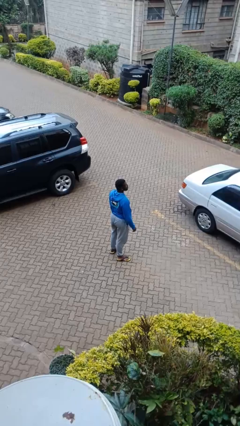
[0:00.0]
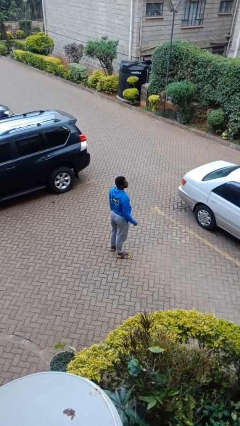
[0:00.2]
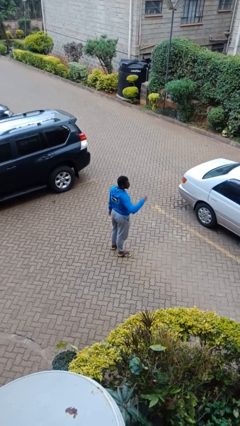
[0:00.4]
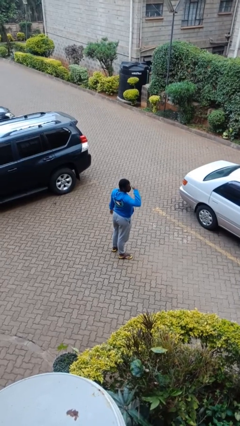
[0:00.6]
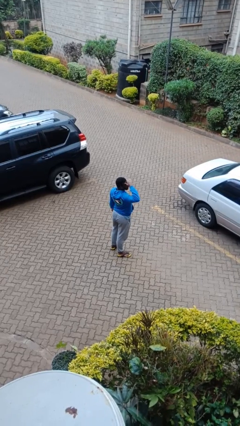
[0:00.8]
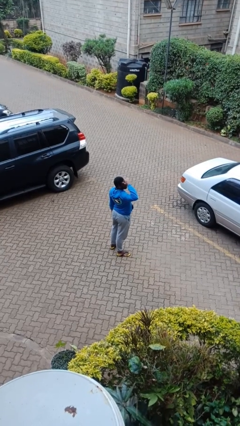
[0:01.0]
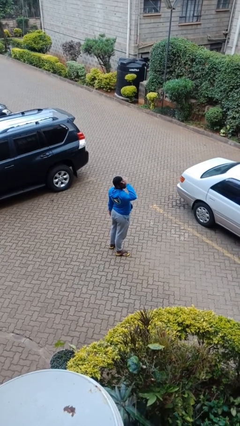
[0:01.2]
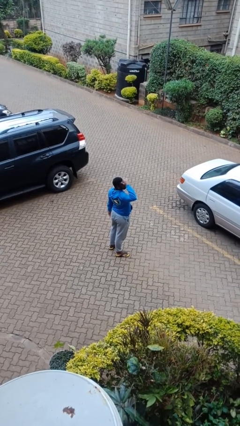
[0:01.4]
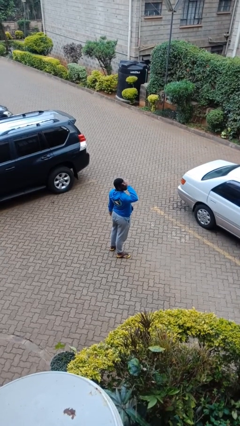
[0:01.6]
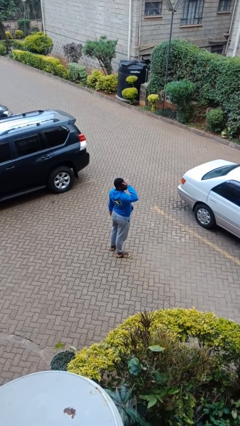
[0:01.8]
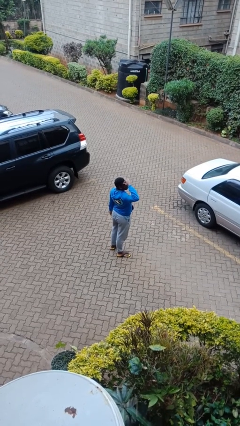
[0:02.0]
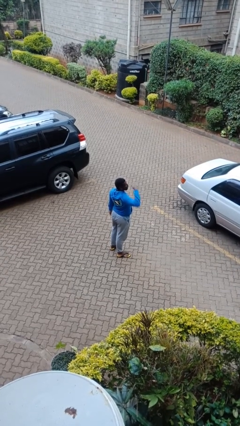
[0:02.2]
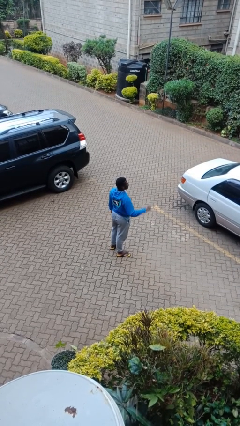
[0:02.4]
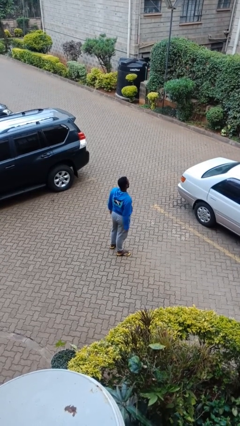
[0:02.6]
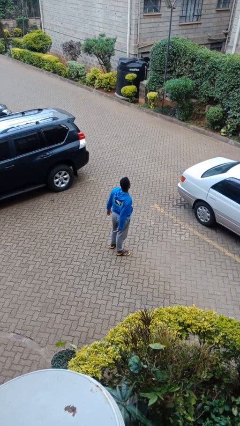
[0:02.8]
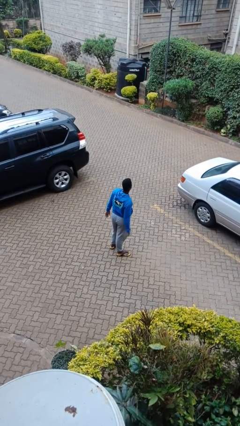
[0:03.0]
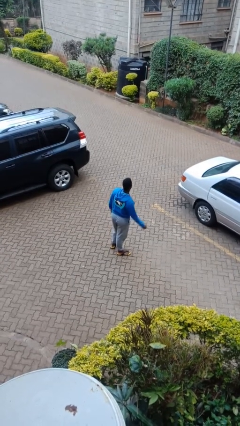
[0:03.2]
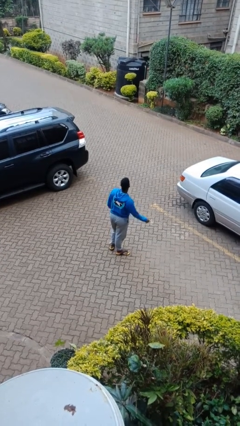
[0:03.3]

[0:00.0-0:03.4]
person shades eyes

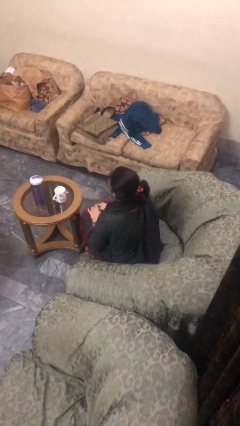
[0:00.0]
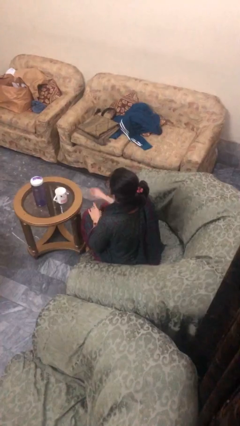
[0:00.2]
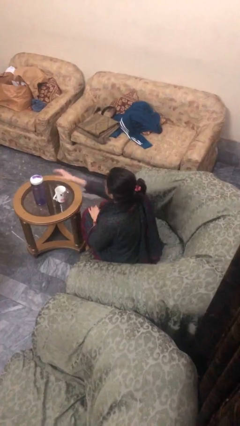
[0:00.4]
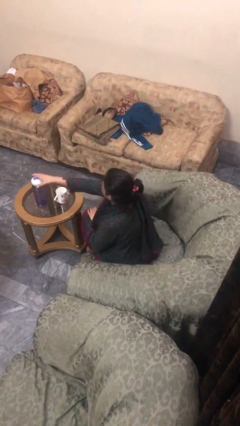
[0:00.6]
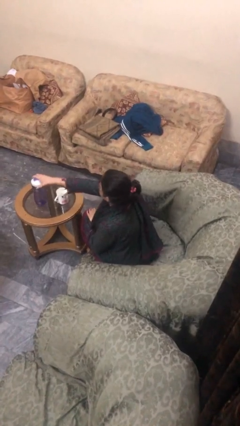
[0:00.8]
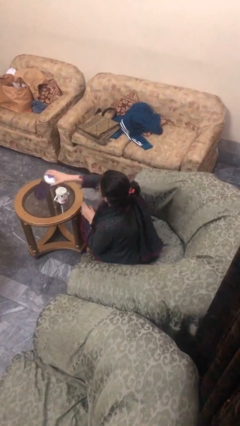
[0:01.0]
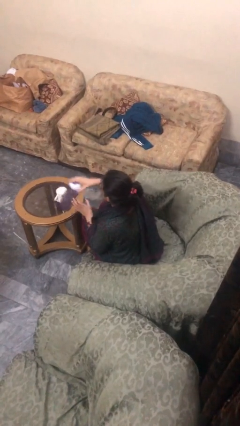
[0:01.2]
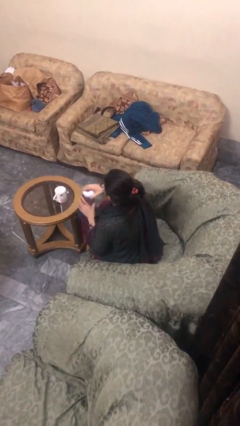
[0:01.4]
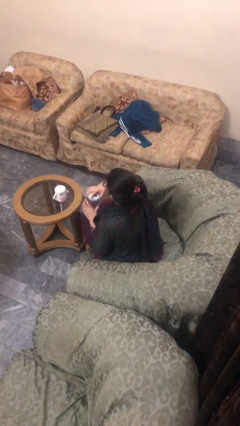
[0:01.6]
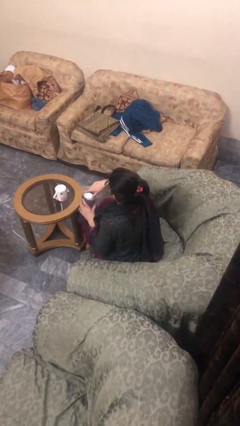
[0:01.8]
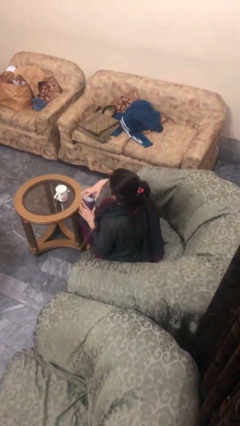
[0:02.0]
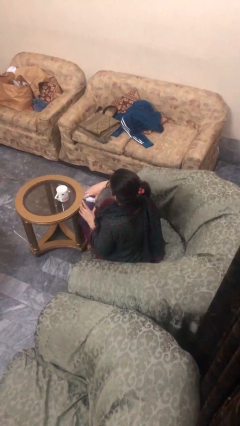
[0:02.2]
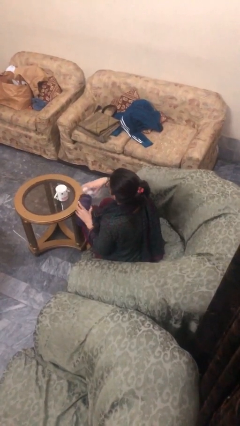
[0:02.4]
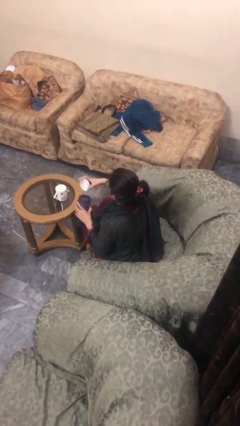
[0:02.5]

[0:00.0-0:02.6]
person unscrews lid from bottle

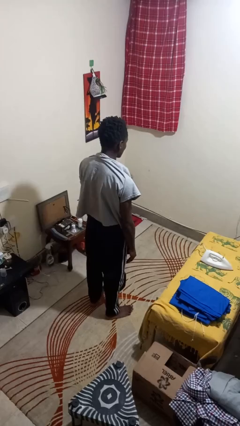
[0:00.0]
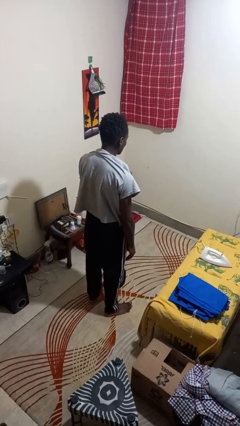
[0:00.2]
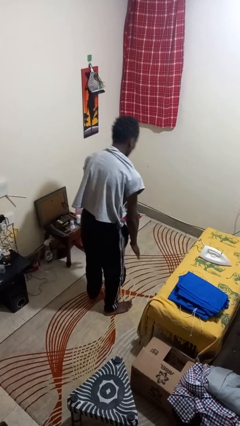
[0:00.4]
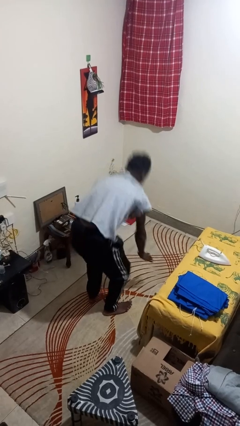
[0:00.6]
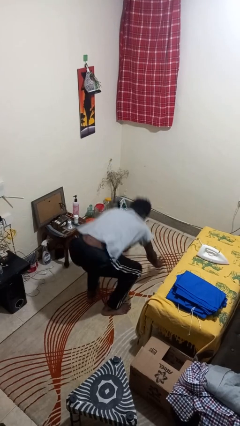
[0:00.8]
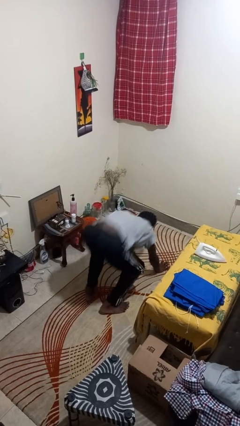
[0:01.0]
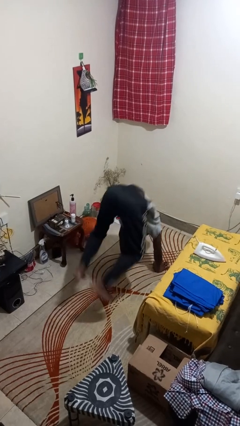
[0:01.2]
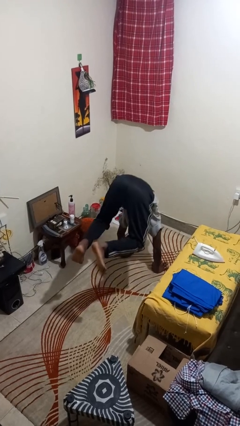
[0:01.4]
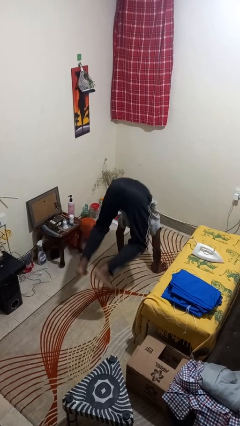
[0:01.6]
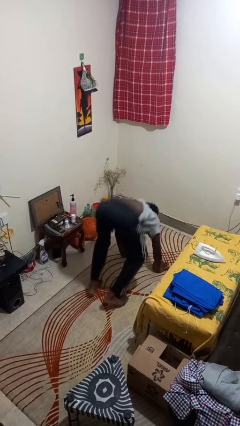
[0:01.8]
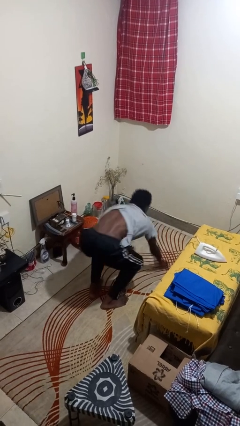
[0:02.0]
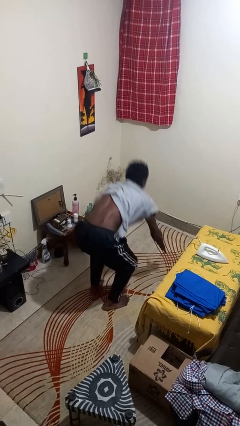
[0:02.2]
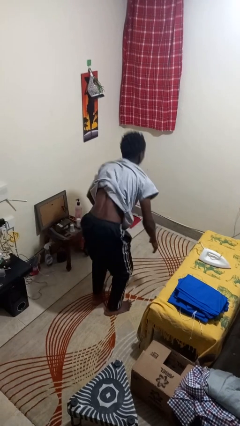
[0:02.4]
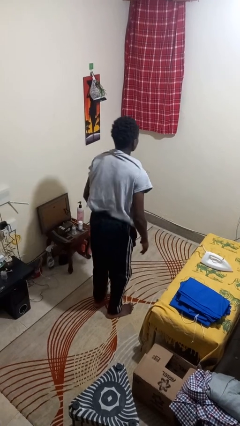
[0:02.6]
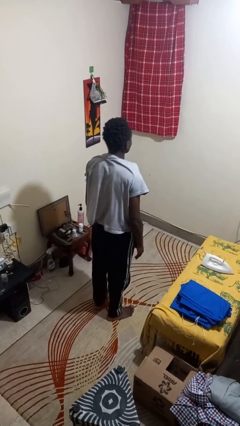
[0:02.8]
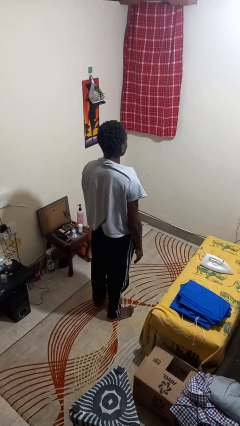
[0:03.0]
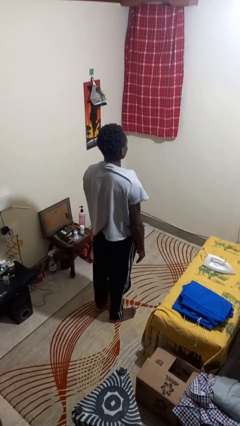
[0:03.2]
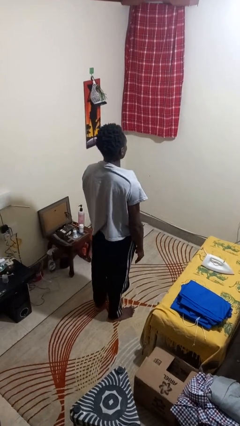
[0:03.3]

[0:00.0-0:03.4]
person handstand

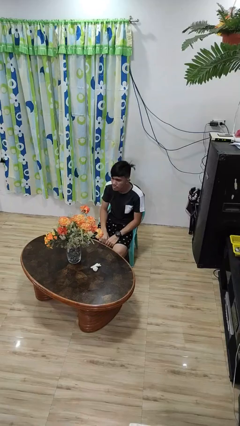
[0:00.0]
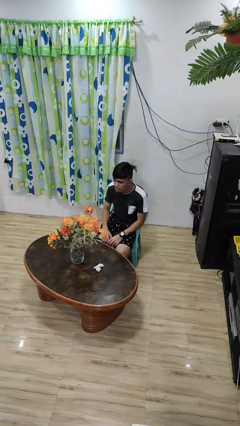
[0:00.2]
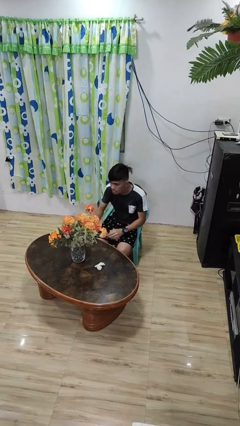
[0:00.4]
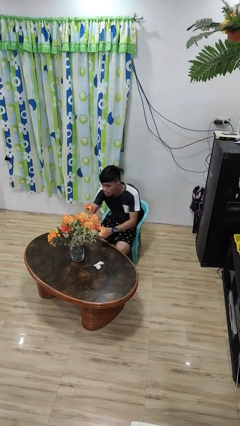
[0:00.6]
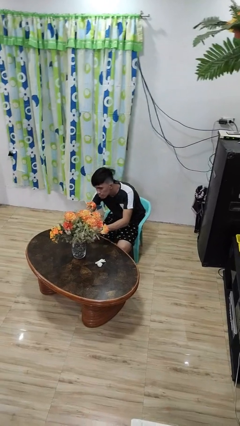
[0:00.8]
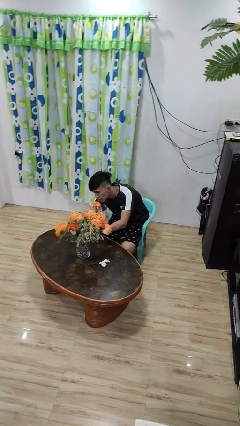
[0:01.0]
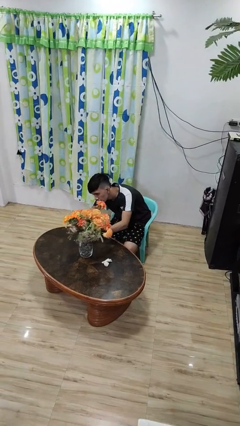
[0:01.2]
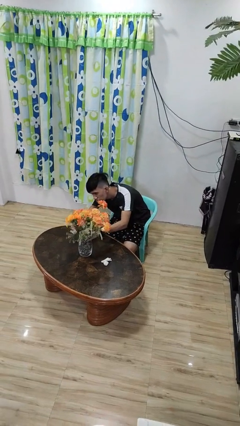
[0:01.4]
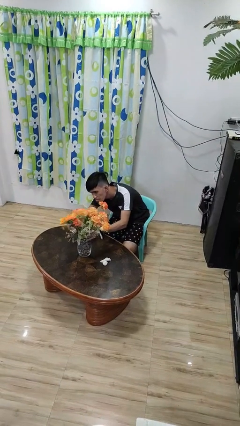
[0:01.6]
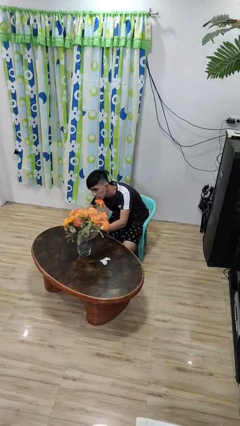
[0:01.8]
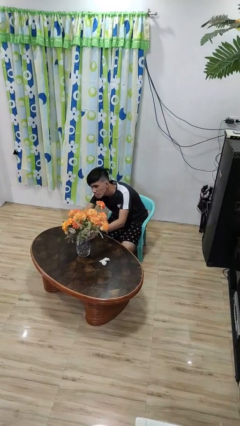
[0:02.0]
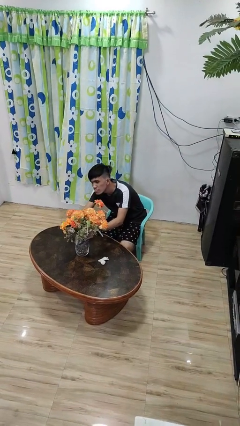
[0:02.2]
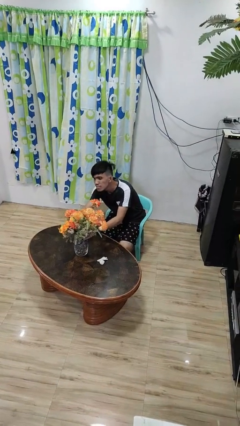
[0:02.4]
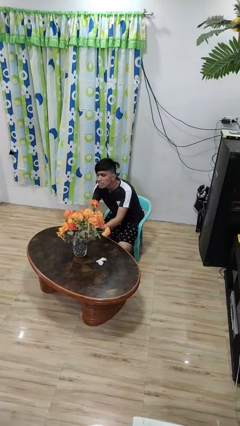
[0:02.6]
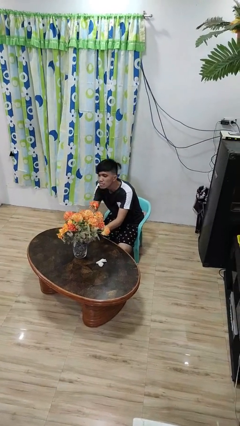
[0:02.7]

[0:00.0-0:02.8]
person arranges flowers in vase

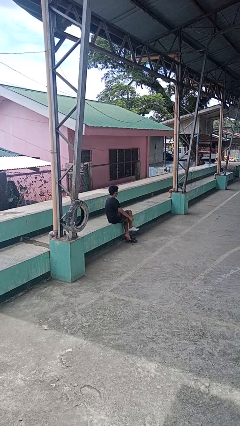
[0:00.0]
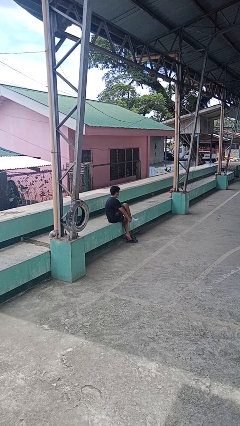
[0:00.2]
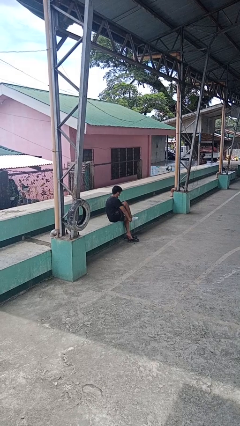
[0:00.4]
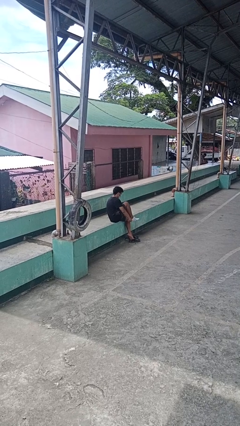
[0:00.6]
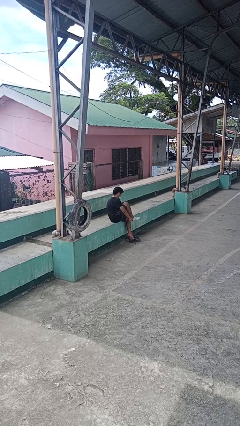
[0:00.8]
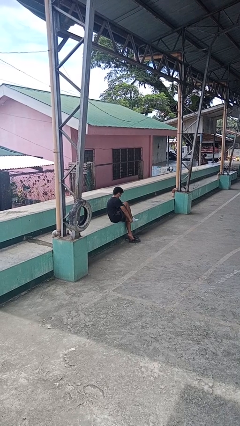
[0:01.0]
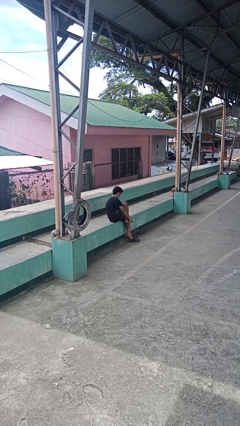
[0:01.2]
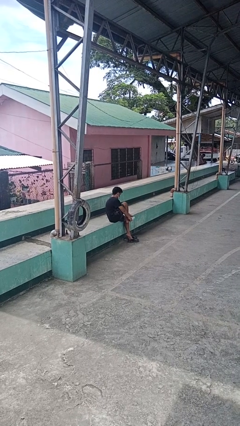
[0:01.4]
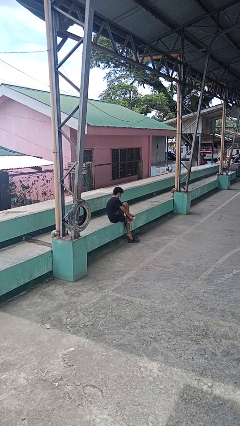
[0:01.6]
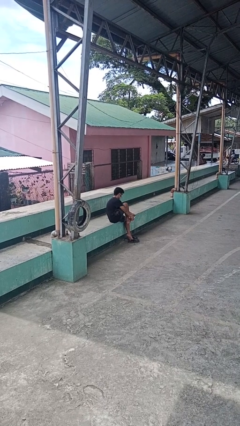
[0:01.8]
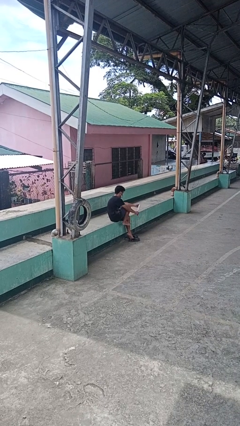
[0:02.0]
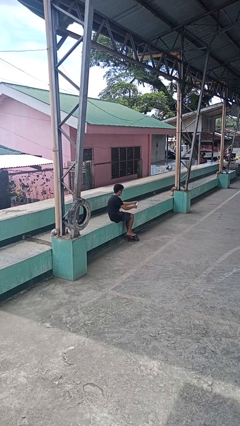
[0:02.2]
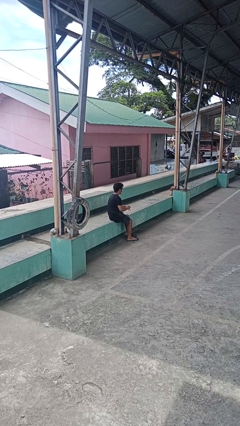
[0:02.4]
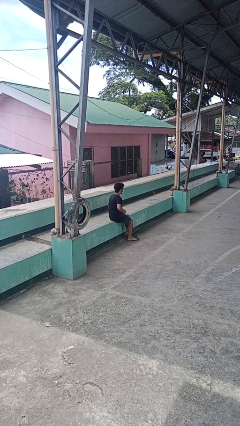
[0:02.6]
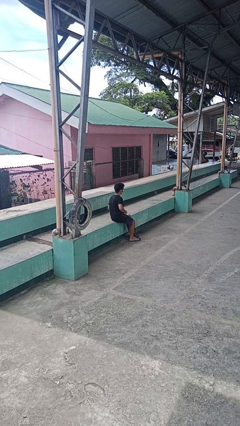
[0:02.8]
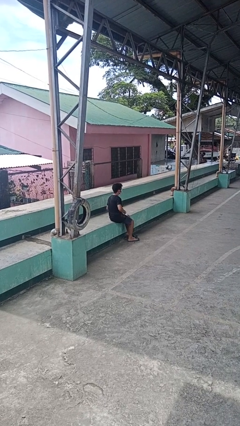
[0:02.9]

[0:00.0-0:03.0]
person takes off socks

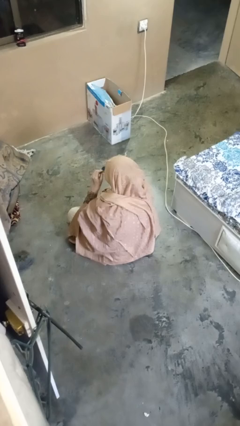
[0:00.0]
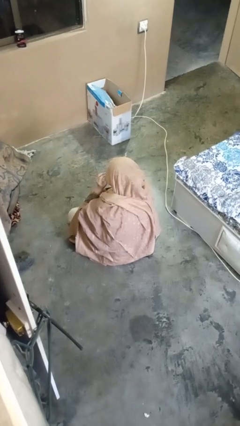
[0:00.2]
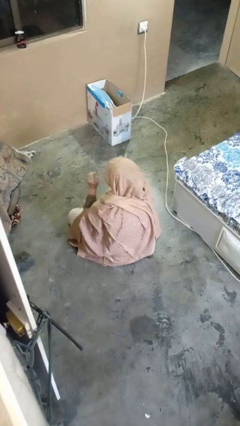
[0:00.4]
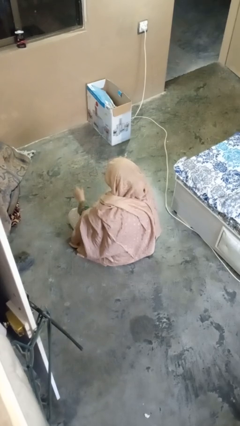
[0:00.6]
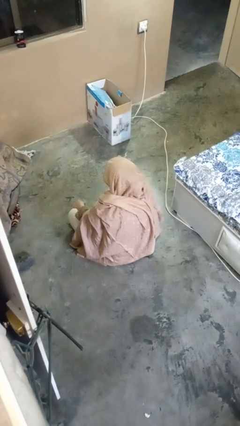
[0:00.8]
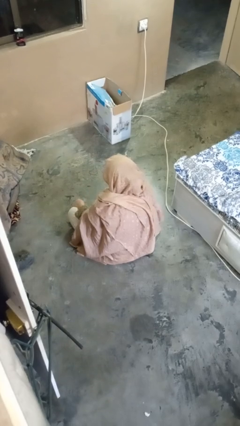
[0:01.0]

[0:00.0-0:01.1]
person puts on glasses

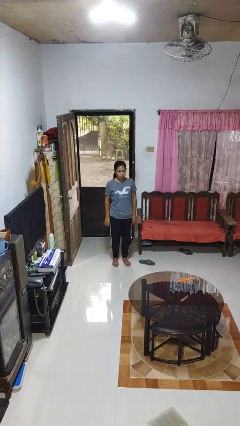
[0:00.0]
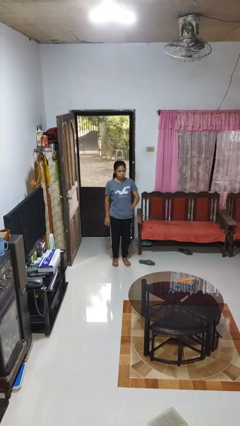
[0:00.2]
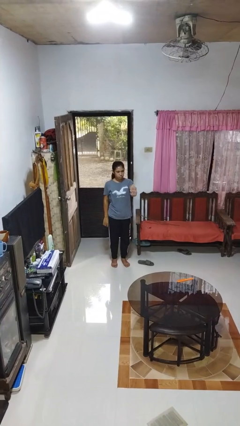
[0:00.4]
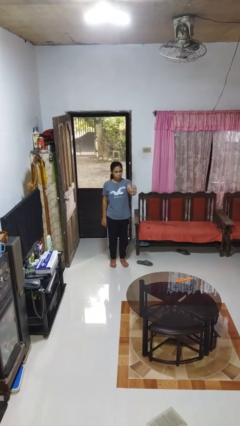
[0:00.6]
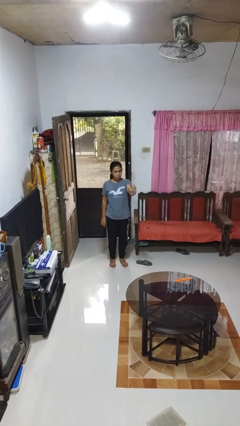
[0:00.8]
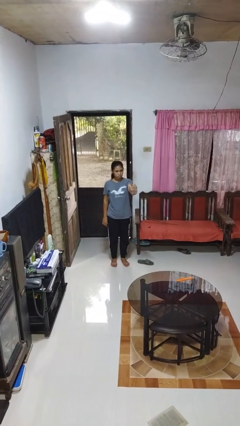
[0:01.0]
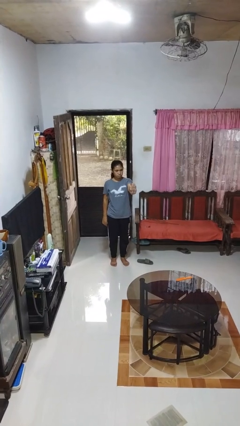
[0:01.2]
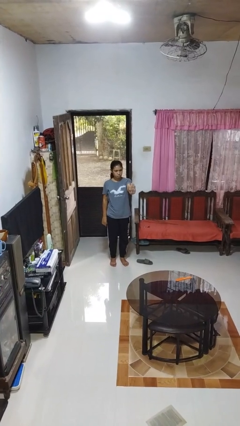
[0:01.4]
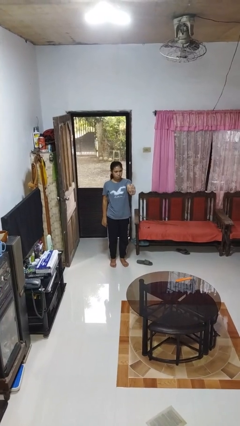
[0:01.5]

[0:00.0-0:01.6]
person gestures stop
